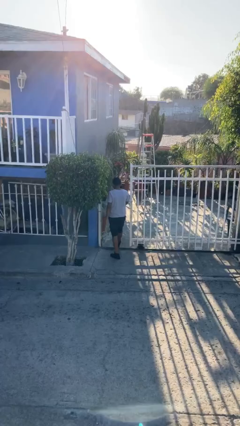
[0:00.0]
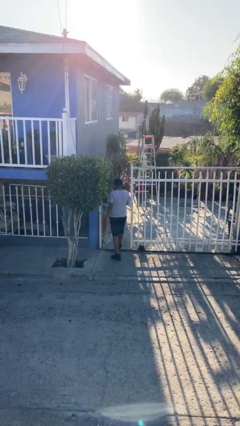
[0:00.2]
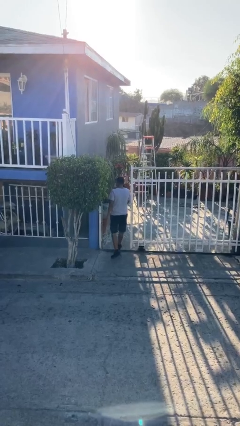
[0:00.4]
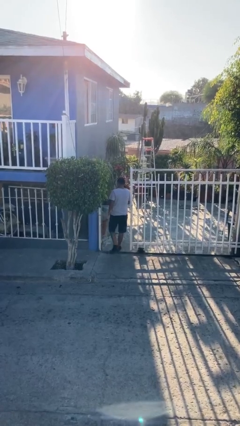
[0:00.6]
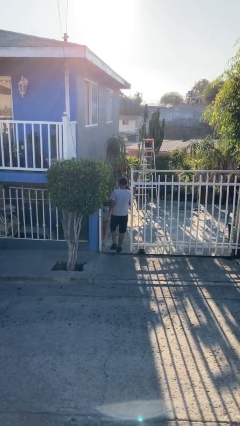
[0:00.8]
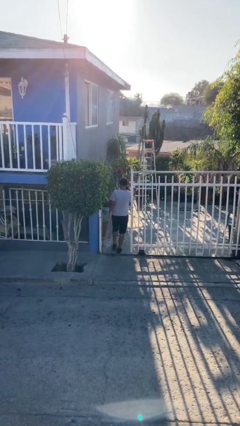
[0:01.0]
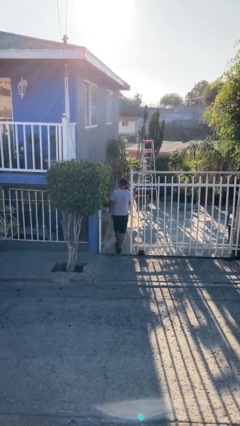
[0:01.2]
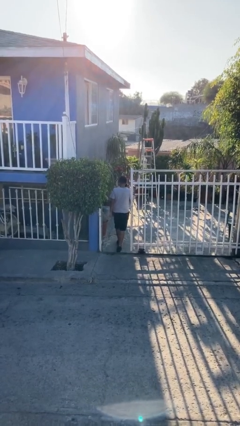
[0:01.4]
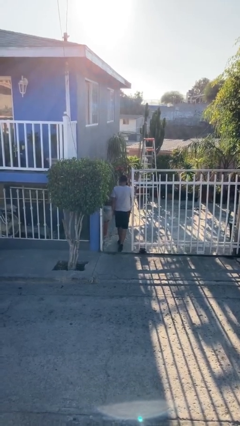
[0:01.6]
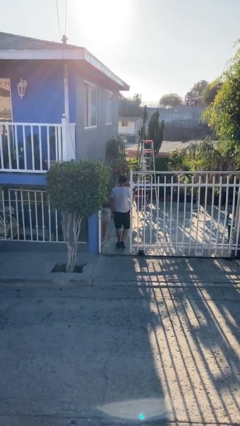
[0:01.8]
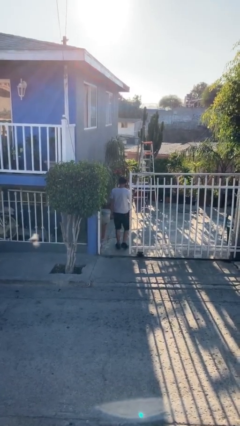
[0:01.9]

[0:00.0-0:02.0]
person exits scene through structure

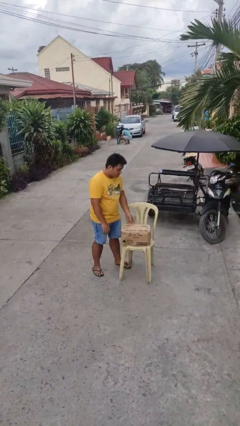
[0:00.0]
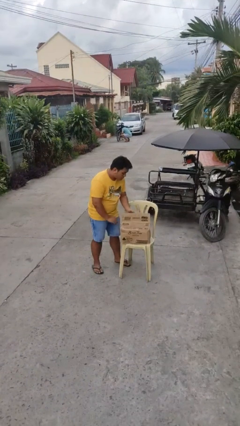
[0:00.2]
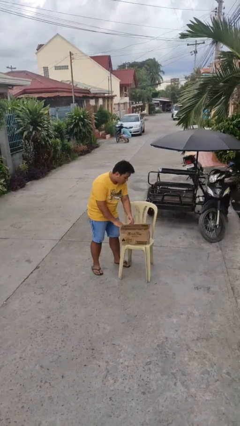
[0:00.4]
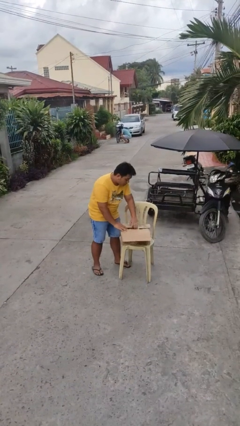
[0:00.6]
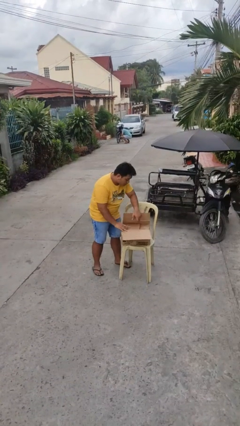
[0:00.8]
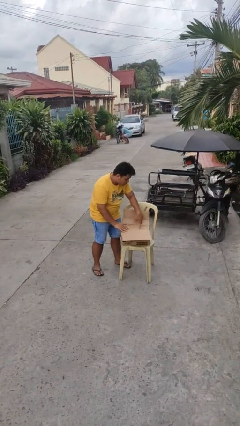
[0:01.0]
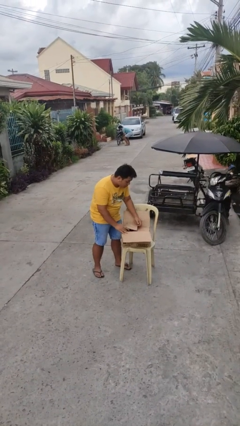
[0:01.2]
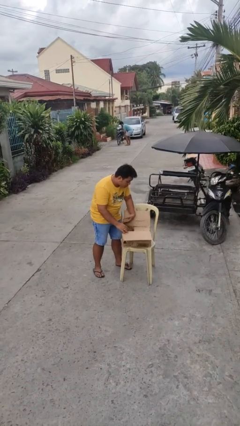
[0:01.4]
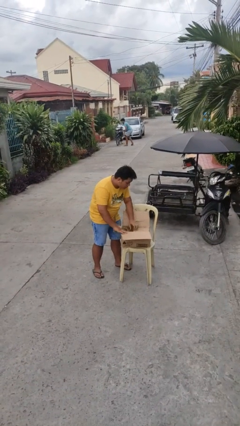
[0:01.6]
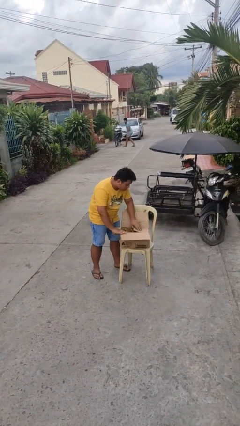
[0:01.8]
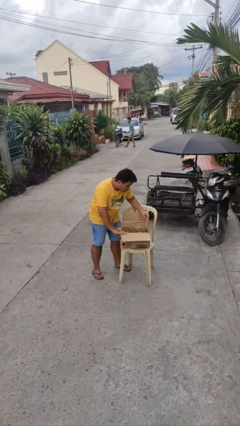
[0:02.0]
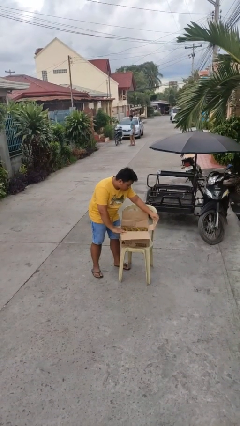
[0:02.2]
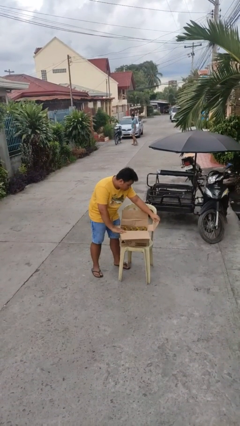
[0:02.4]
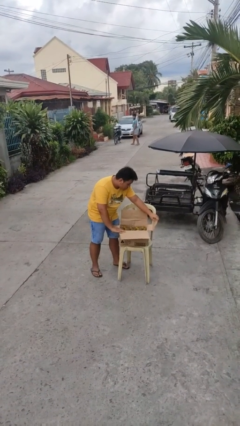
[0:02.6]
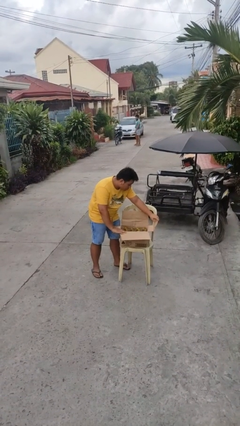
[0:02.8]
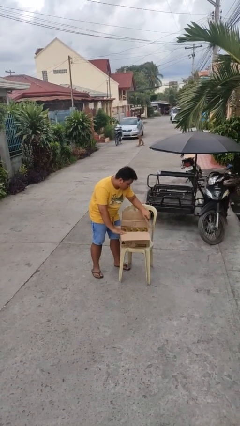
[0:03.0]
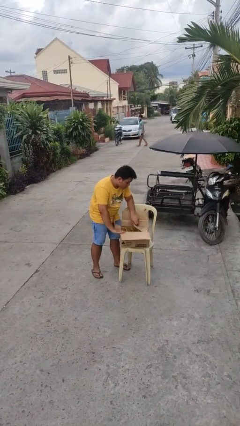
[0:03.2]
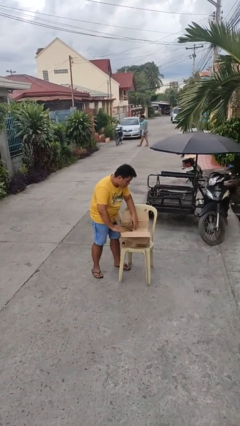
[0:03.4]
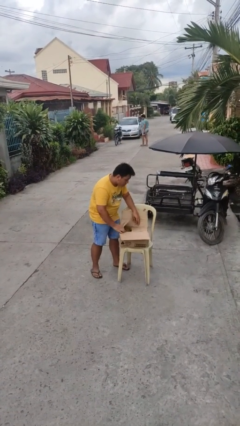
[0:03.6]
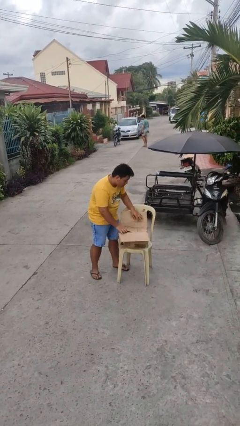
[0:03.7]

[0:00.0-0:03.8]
person opens box

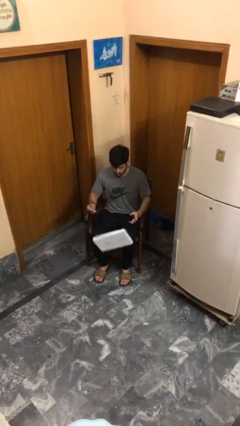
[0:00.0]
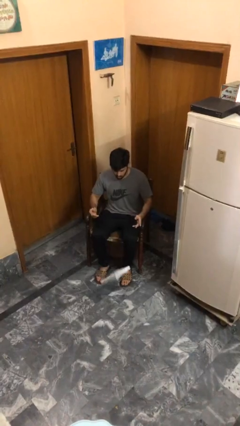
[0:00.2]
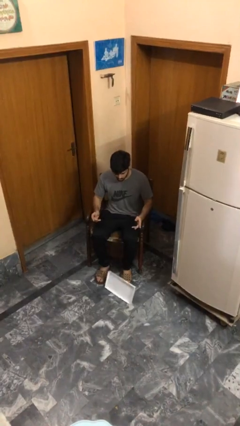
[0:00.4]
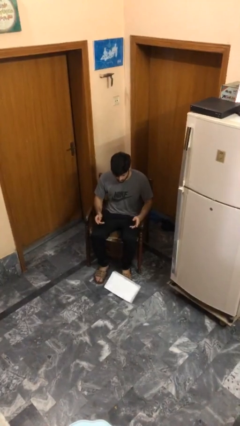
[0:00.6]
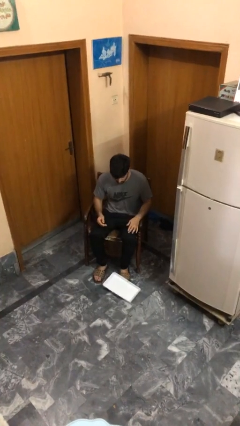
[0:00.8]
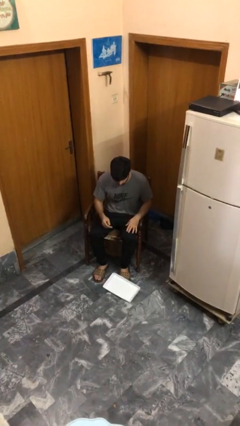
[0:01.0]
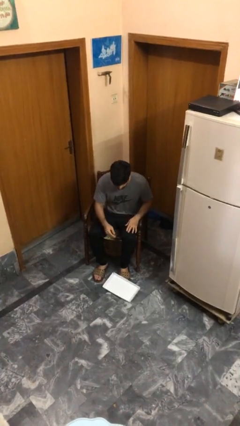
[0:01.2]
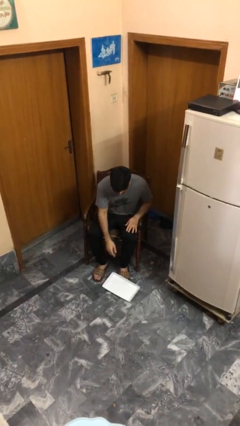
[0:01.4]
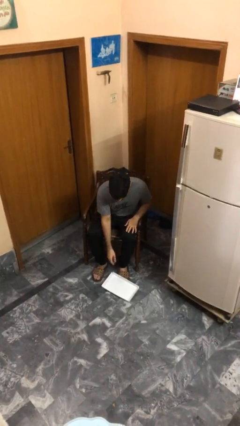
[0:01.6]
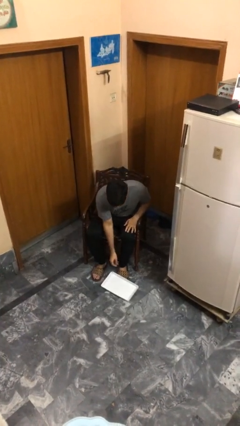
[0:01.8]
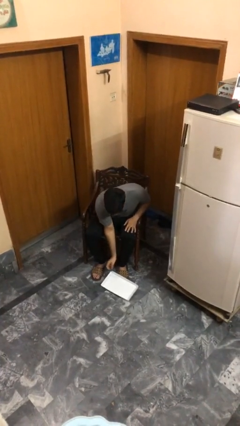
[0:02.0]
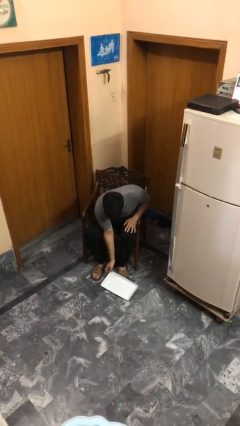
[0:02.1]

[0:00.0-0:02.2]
person drops object

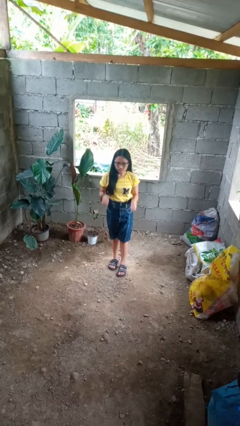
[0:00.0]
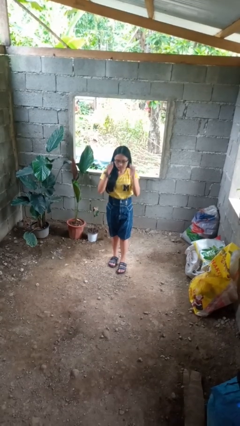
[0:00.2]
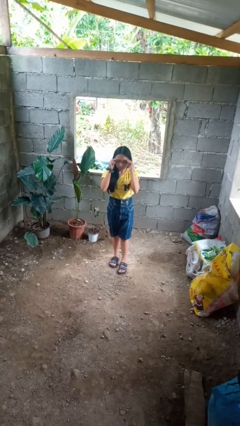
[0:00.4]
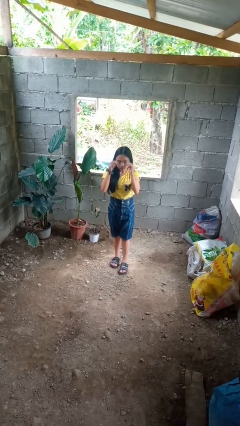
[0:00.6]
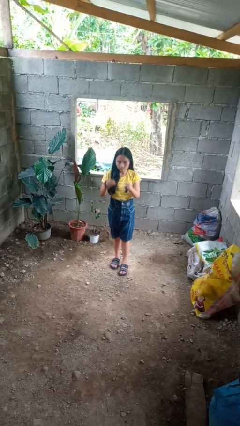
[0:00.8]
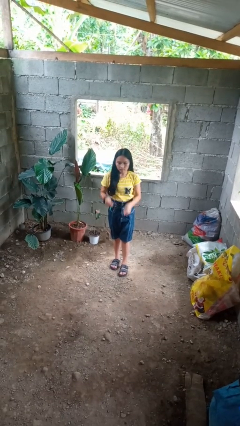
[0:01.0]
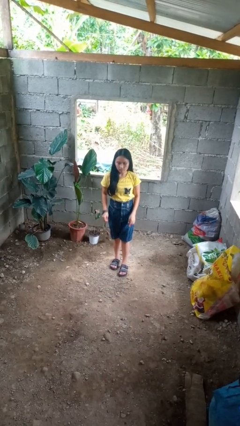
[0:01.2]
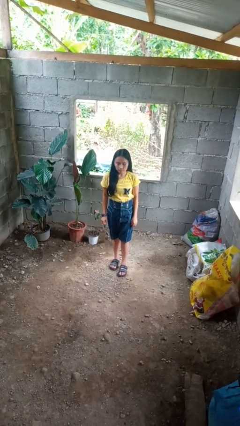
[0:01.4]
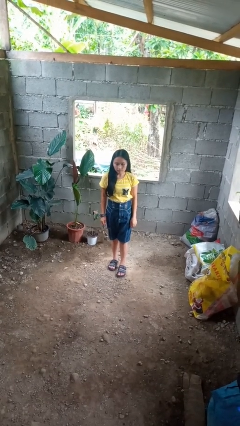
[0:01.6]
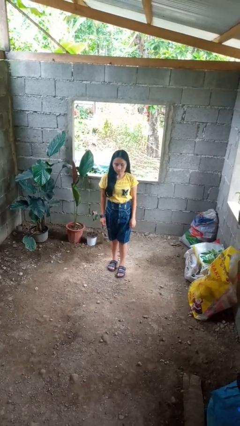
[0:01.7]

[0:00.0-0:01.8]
person takes off glasses

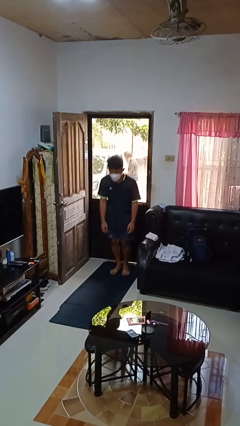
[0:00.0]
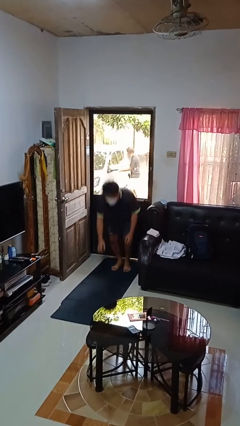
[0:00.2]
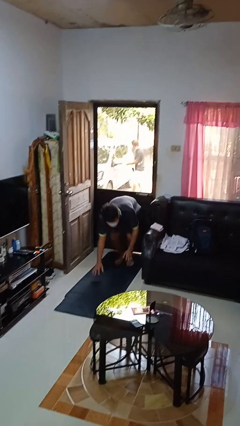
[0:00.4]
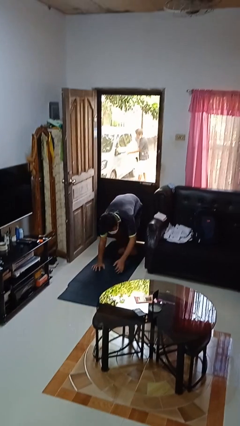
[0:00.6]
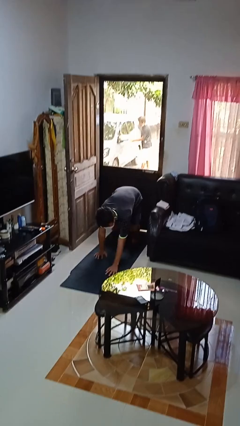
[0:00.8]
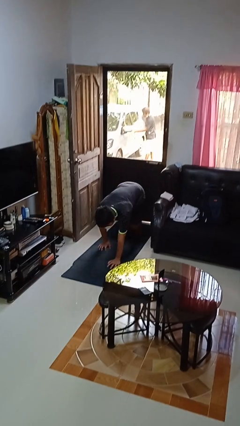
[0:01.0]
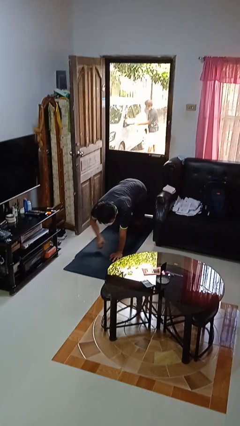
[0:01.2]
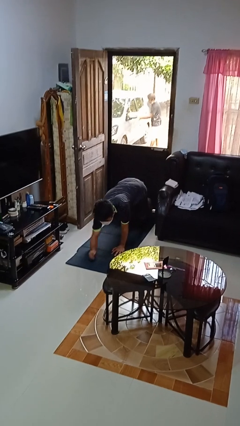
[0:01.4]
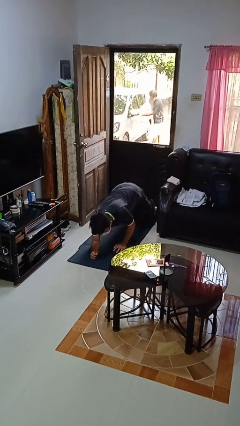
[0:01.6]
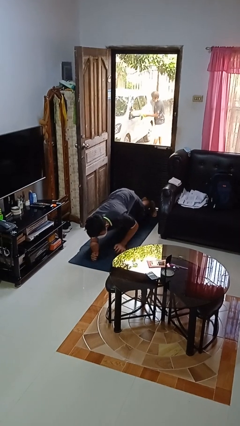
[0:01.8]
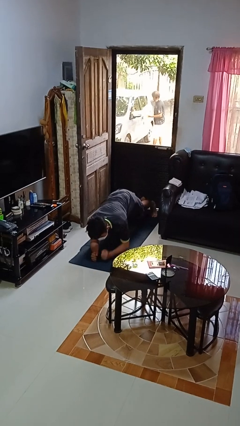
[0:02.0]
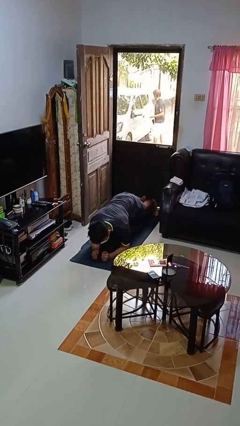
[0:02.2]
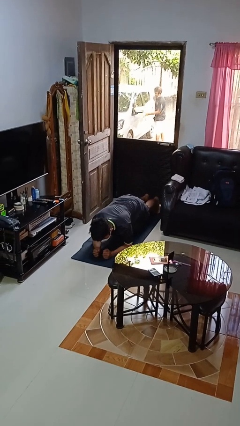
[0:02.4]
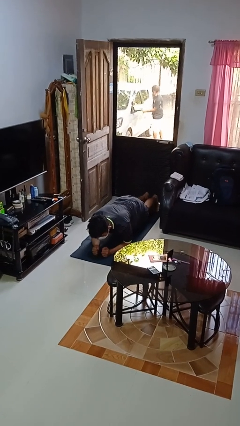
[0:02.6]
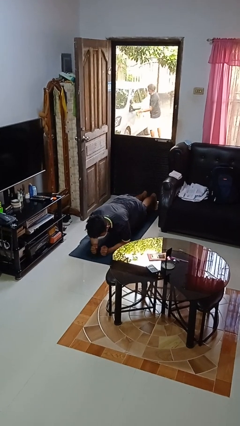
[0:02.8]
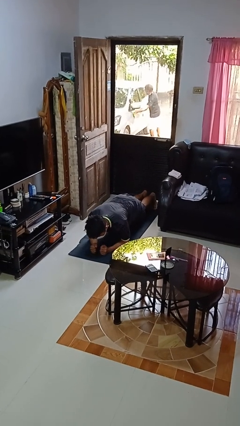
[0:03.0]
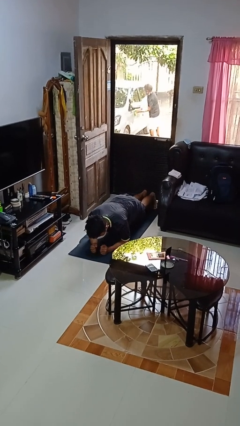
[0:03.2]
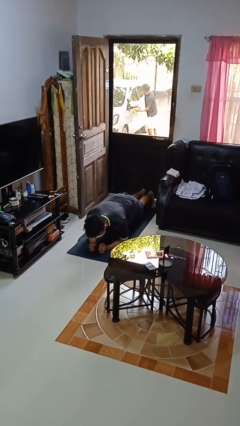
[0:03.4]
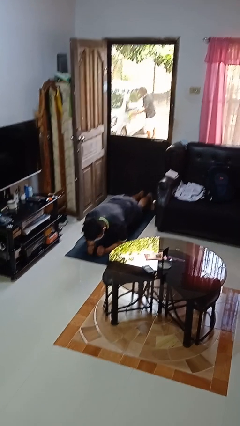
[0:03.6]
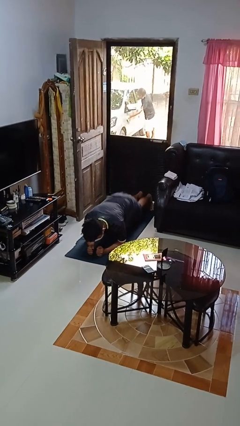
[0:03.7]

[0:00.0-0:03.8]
person exercises with plank

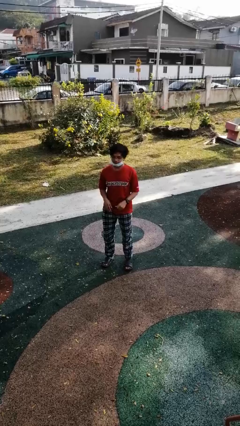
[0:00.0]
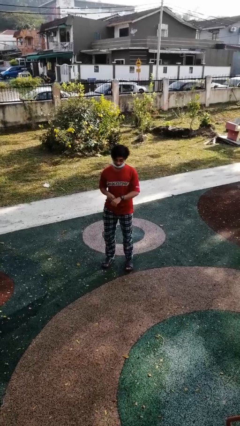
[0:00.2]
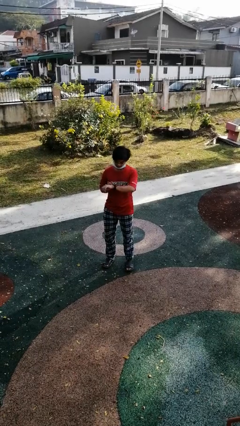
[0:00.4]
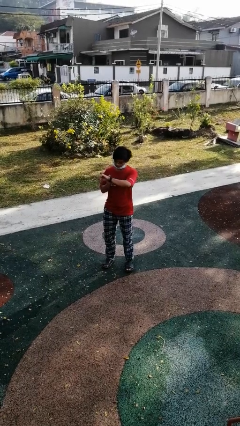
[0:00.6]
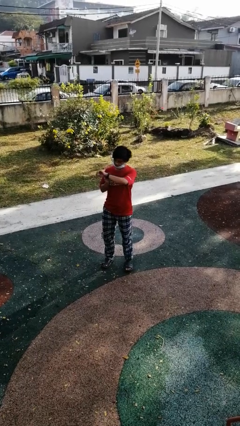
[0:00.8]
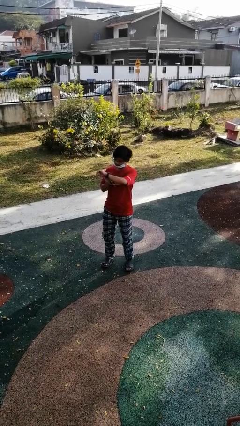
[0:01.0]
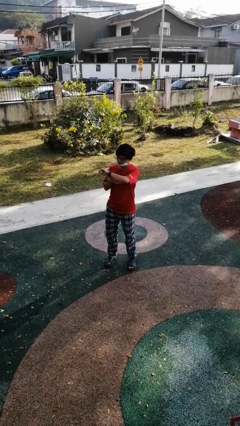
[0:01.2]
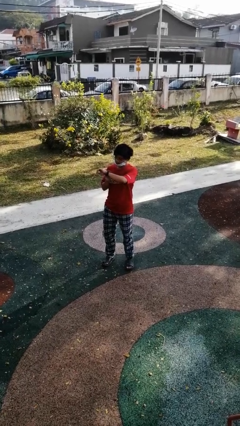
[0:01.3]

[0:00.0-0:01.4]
person looks at wristwatch

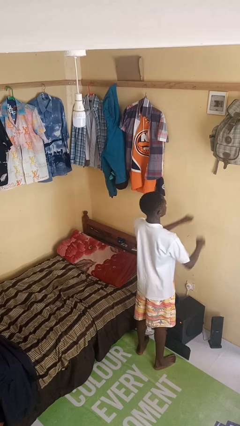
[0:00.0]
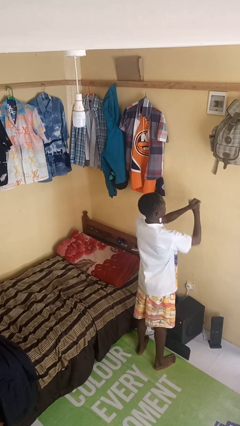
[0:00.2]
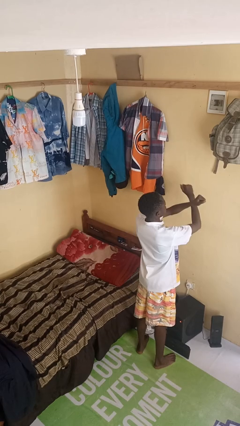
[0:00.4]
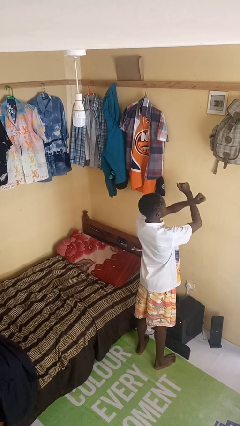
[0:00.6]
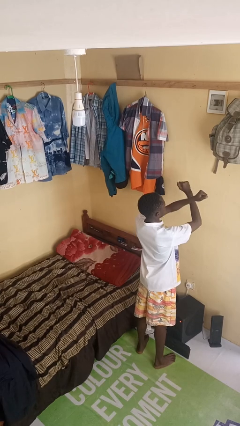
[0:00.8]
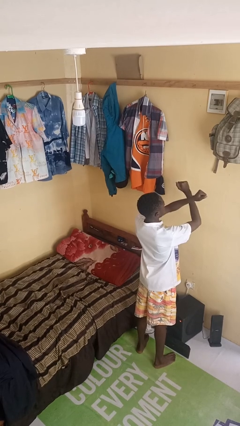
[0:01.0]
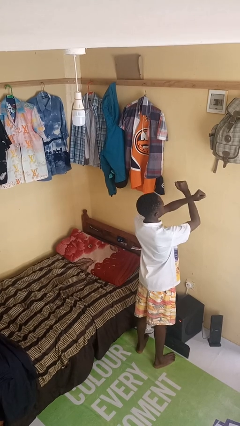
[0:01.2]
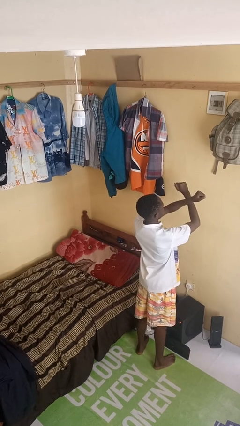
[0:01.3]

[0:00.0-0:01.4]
person gestures arms x

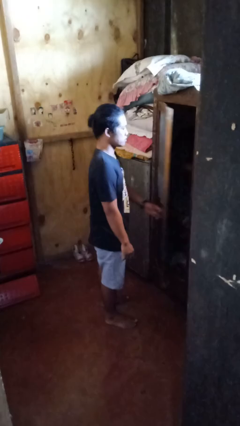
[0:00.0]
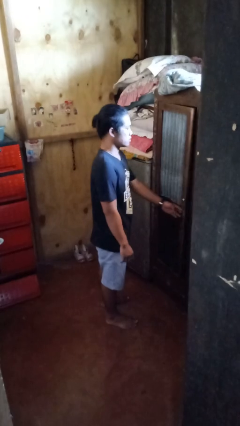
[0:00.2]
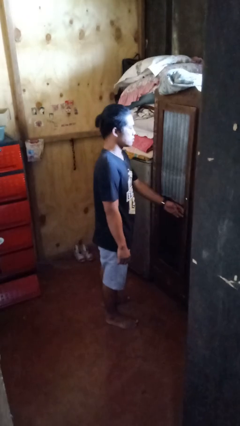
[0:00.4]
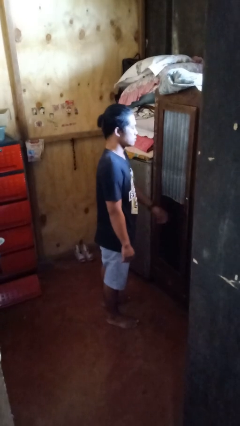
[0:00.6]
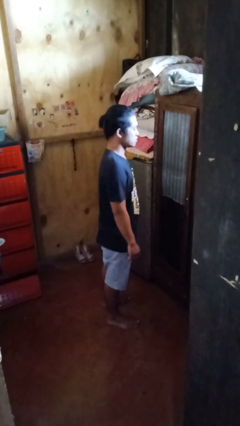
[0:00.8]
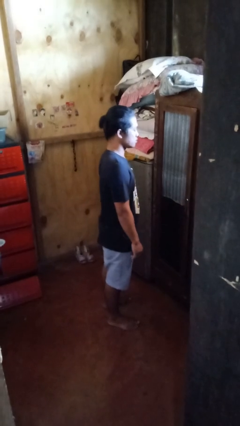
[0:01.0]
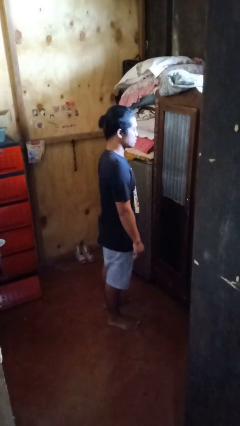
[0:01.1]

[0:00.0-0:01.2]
person closes closet door
